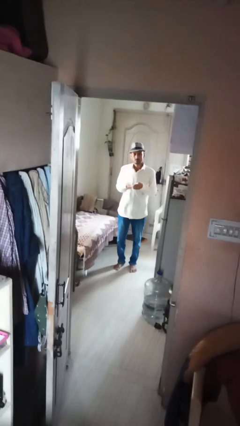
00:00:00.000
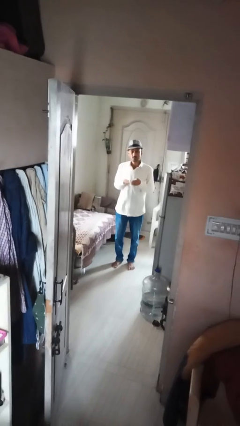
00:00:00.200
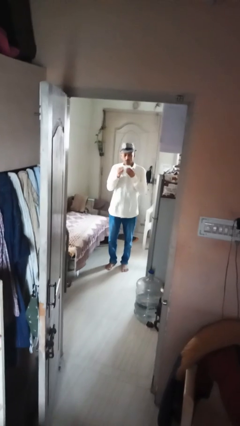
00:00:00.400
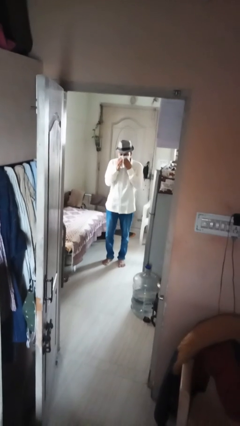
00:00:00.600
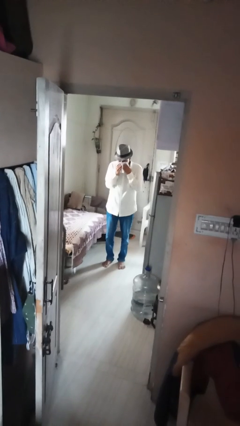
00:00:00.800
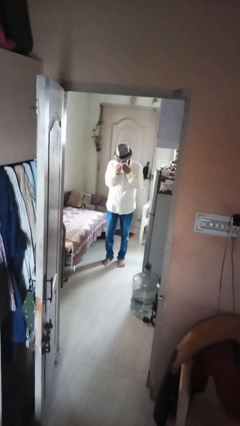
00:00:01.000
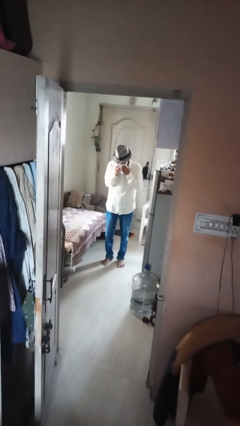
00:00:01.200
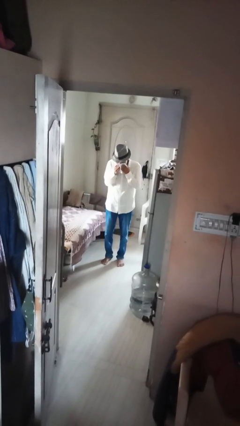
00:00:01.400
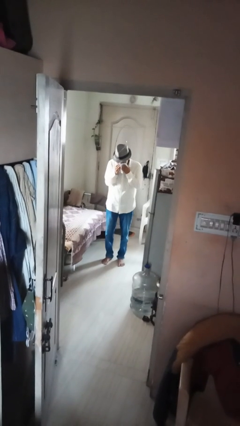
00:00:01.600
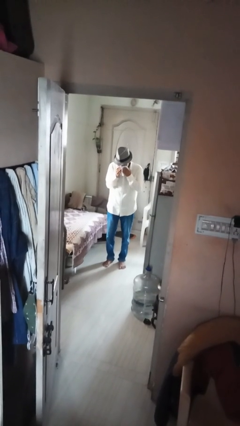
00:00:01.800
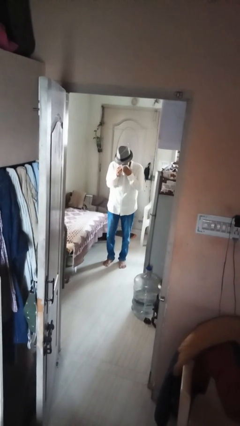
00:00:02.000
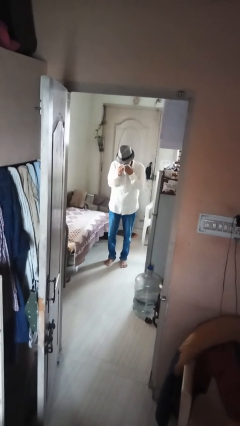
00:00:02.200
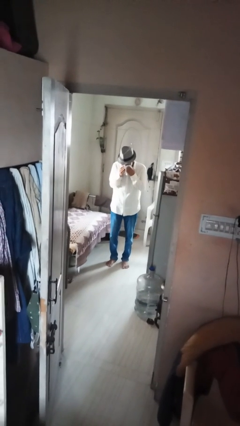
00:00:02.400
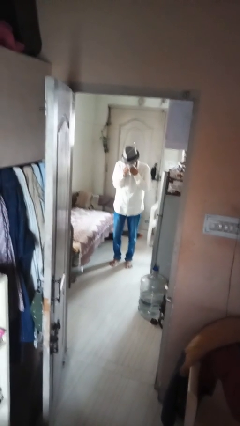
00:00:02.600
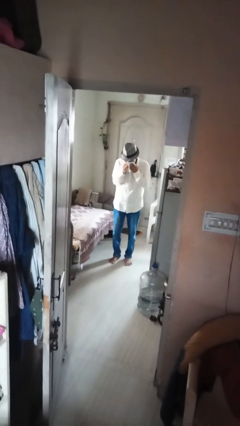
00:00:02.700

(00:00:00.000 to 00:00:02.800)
person blows nose

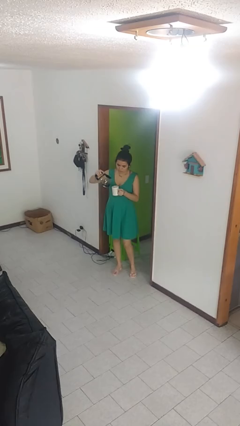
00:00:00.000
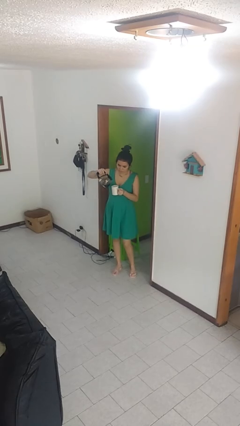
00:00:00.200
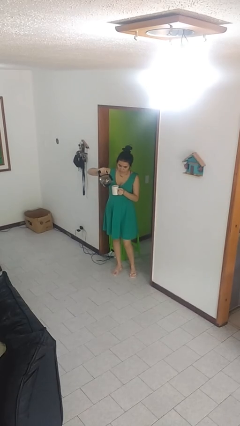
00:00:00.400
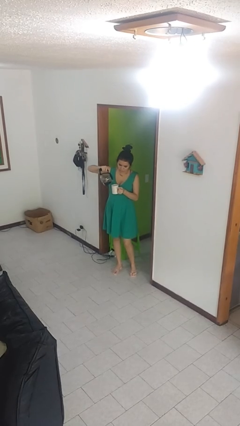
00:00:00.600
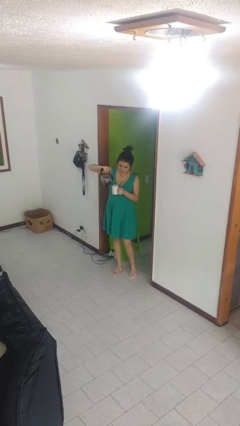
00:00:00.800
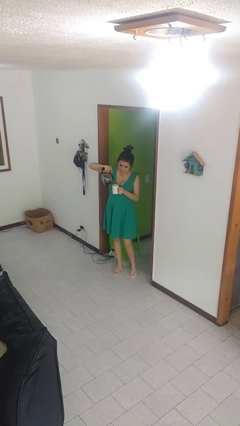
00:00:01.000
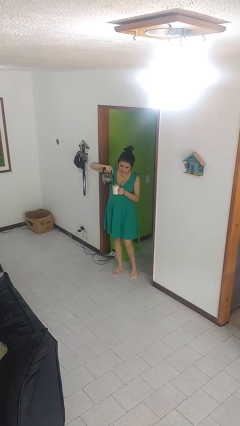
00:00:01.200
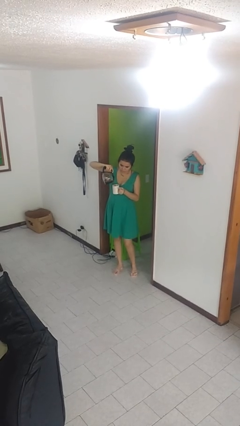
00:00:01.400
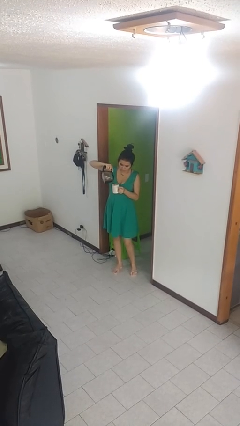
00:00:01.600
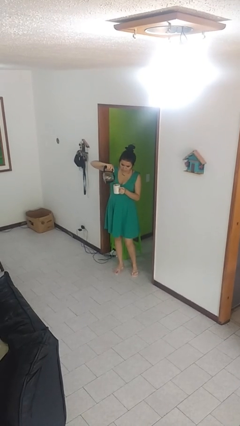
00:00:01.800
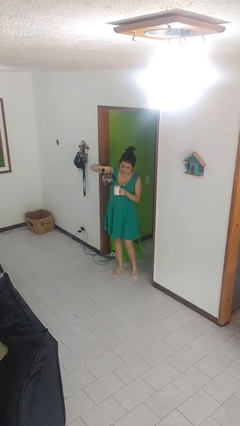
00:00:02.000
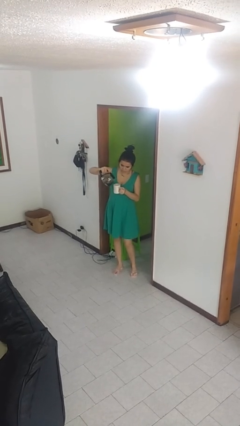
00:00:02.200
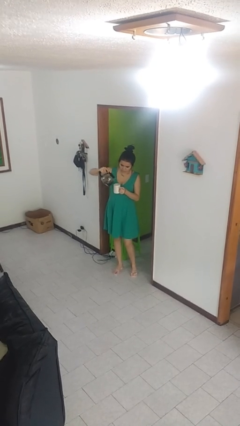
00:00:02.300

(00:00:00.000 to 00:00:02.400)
person pours coffee into mug

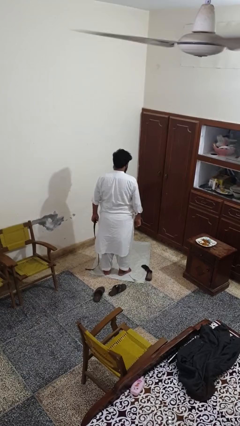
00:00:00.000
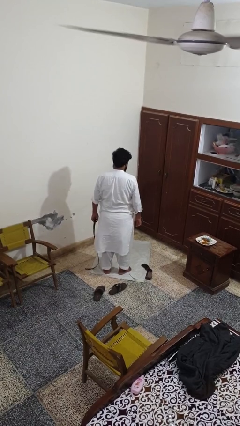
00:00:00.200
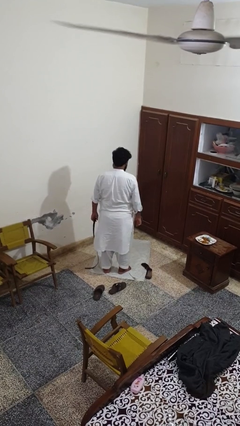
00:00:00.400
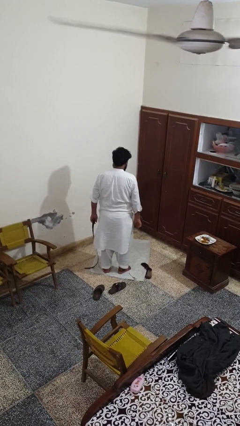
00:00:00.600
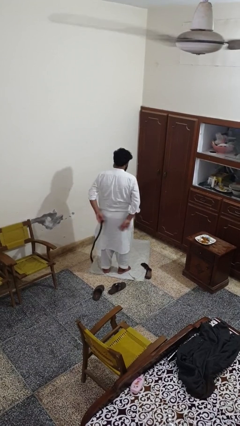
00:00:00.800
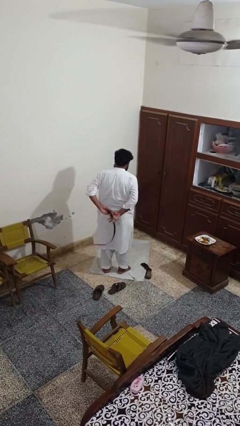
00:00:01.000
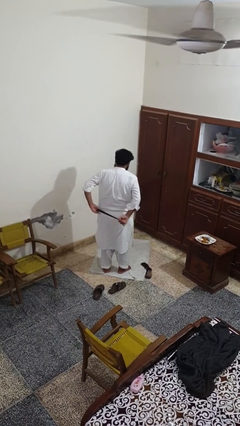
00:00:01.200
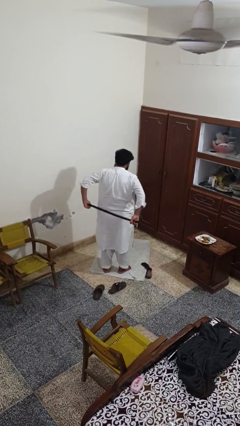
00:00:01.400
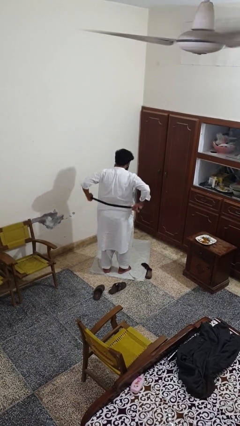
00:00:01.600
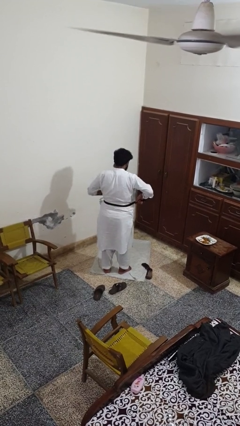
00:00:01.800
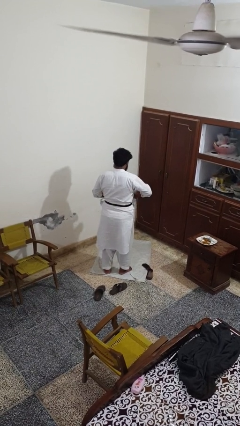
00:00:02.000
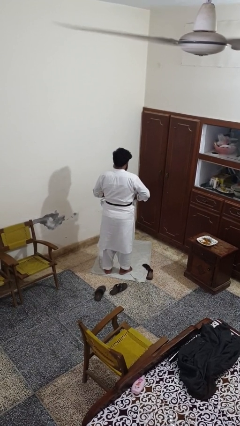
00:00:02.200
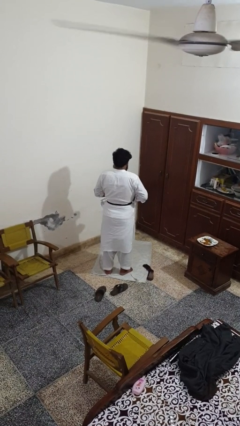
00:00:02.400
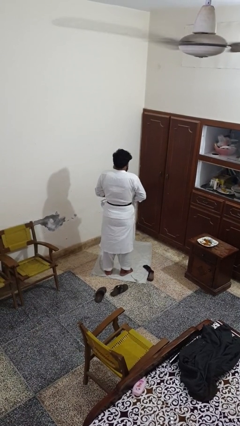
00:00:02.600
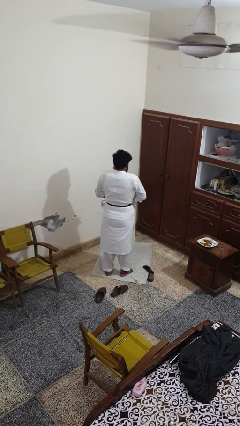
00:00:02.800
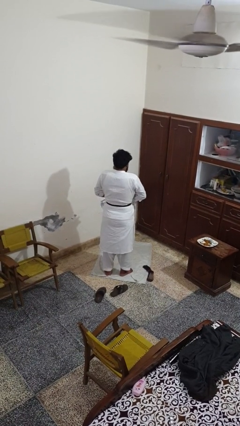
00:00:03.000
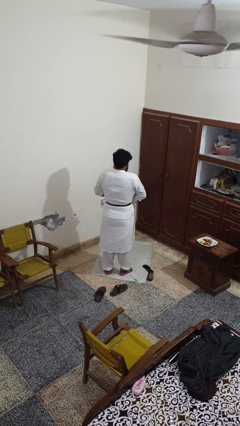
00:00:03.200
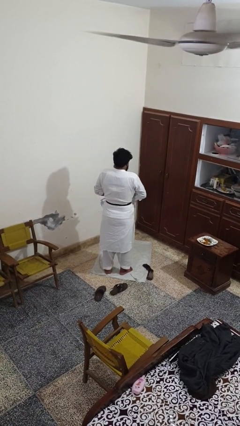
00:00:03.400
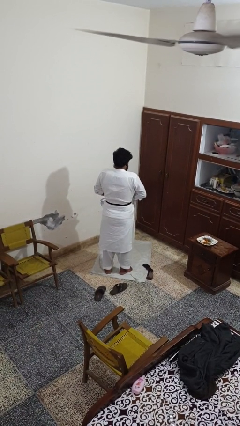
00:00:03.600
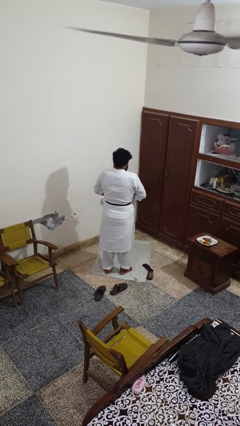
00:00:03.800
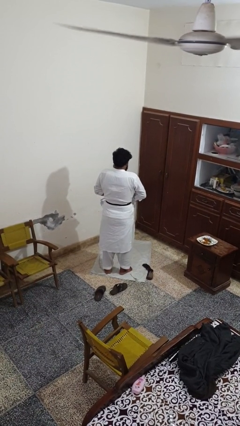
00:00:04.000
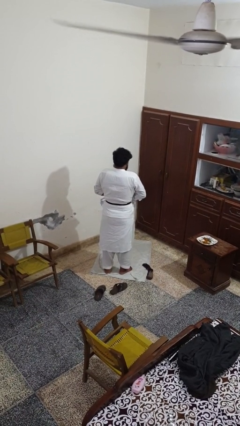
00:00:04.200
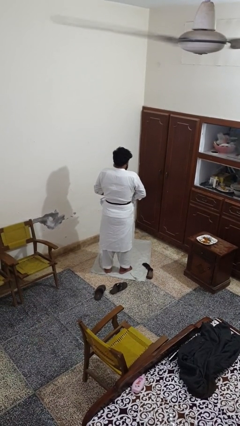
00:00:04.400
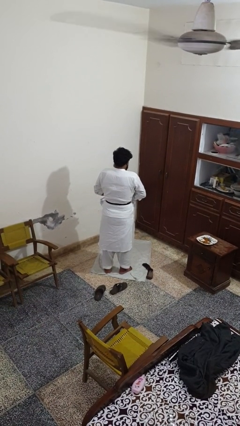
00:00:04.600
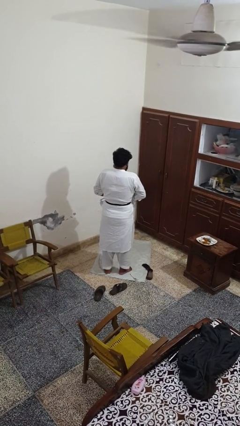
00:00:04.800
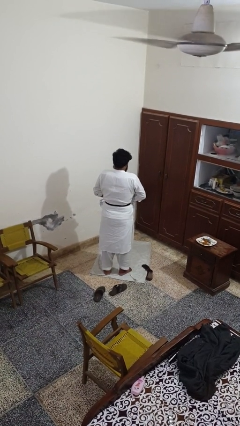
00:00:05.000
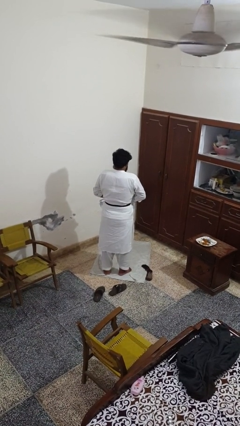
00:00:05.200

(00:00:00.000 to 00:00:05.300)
person puts on belt

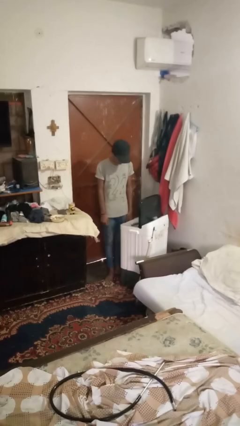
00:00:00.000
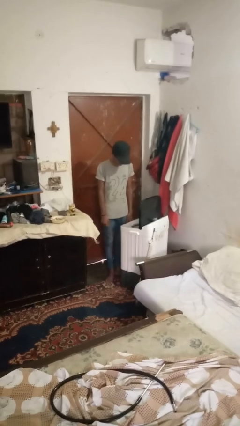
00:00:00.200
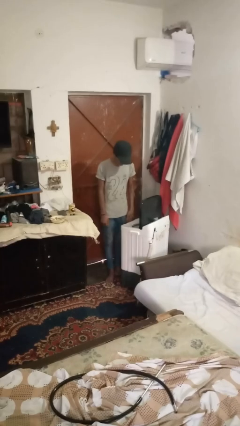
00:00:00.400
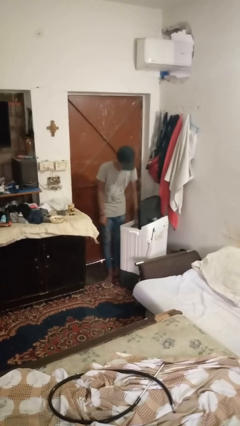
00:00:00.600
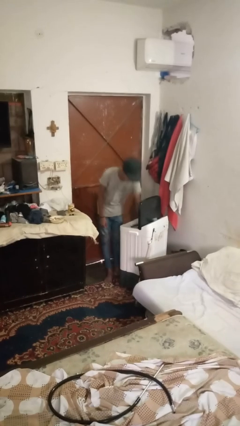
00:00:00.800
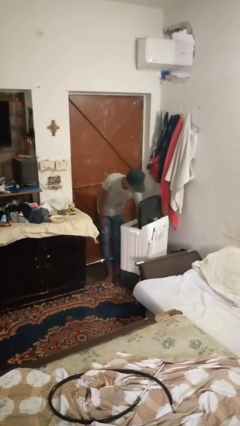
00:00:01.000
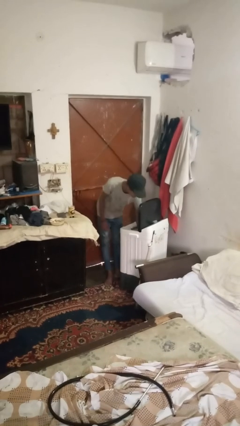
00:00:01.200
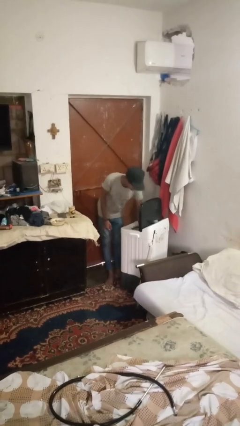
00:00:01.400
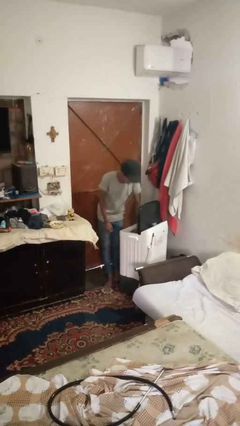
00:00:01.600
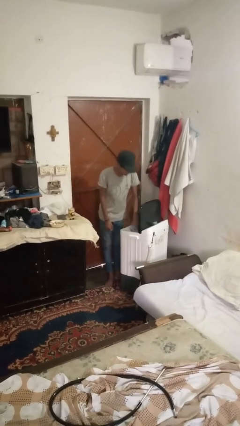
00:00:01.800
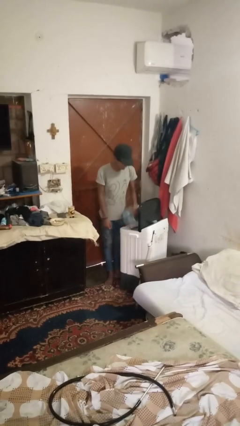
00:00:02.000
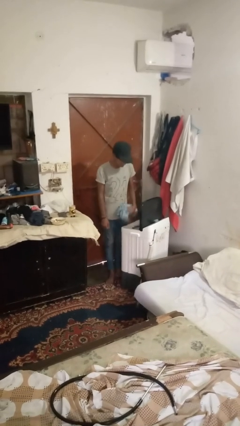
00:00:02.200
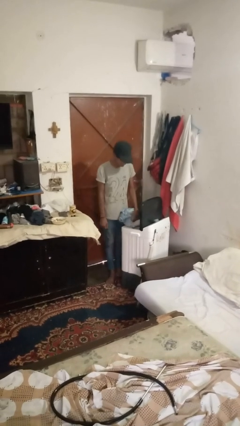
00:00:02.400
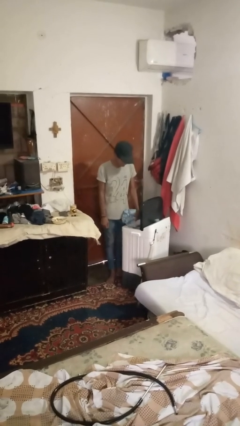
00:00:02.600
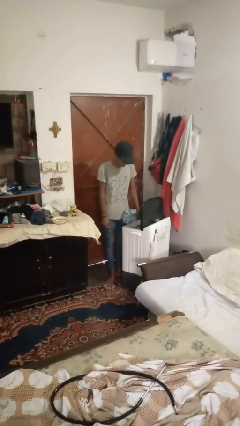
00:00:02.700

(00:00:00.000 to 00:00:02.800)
person unloads clotheswasher

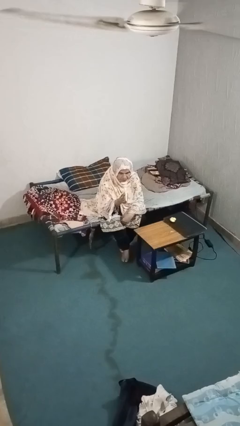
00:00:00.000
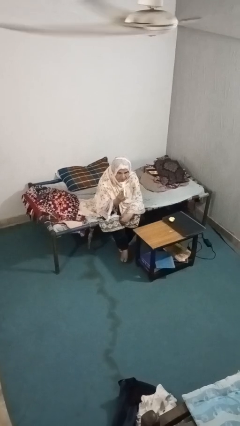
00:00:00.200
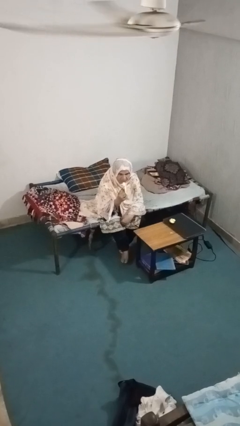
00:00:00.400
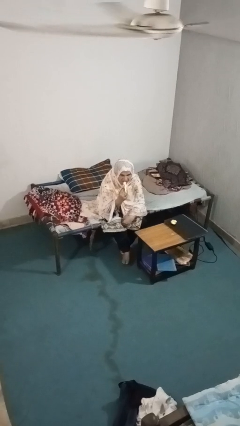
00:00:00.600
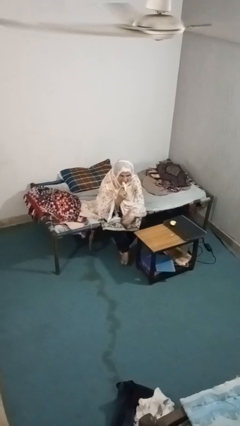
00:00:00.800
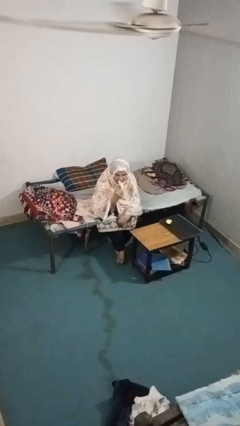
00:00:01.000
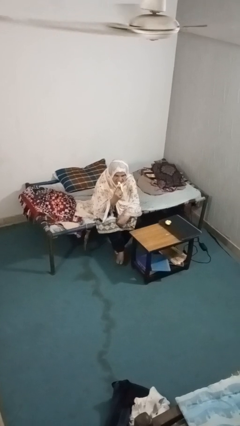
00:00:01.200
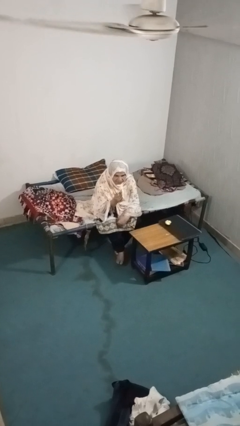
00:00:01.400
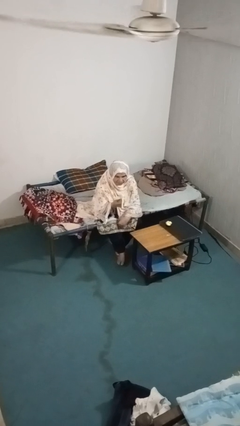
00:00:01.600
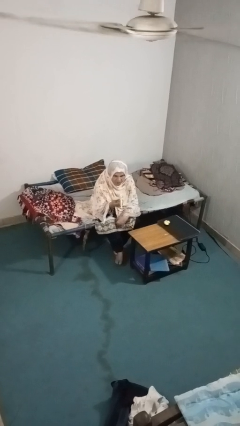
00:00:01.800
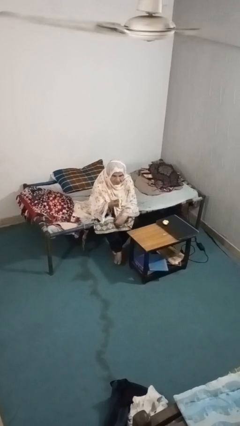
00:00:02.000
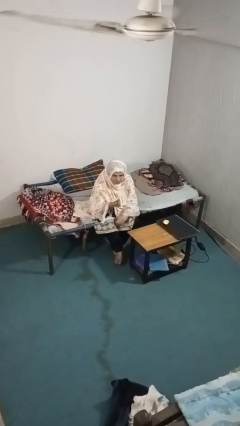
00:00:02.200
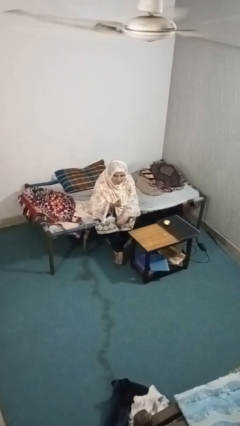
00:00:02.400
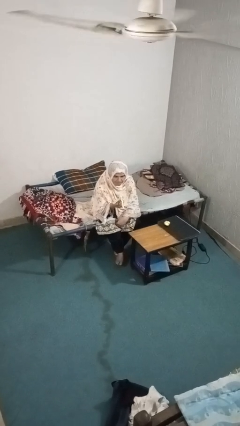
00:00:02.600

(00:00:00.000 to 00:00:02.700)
person eats banana

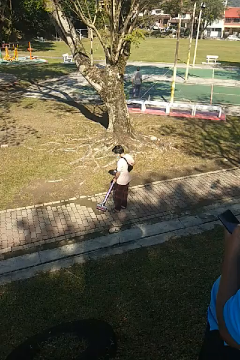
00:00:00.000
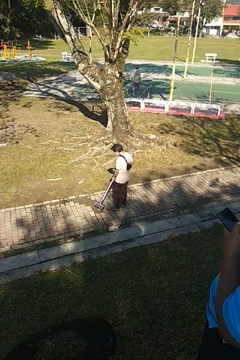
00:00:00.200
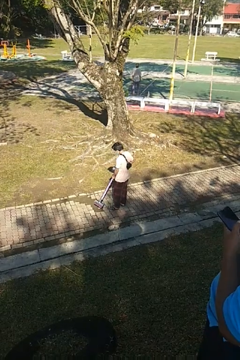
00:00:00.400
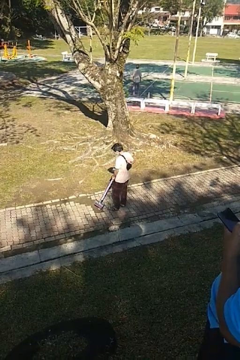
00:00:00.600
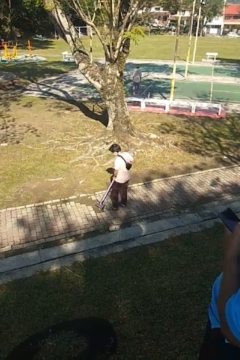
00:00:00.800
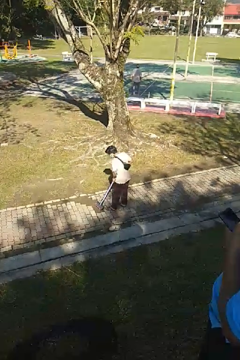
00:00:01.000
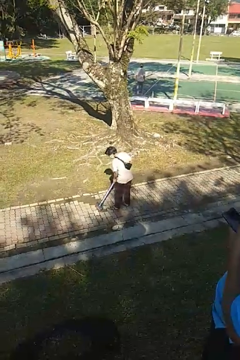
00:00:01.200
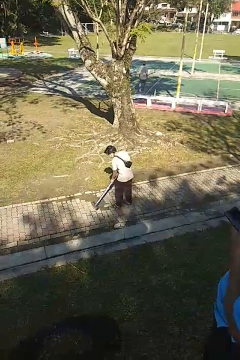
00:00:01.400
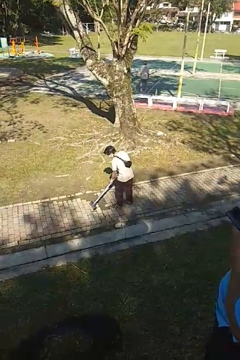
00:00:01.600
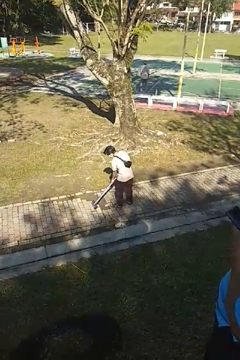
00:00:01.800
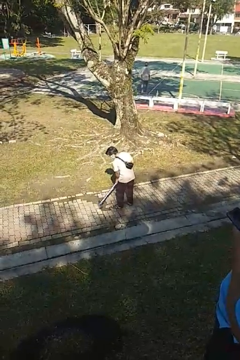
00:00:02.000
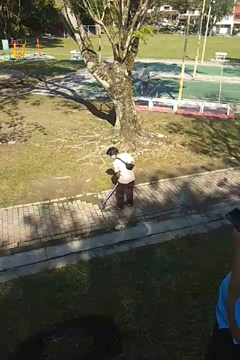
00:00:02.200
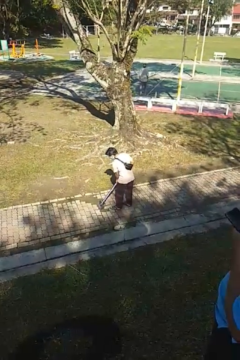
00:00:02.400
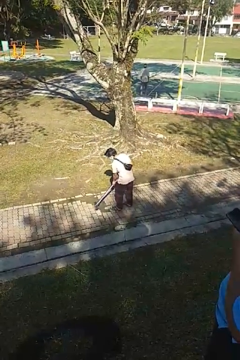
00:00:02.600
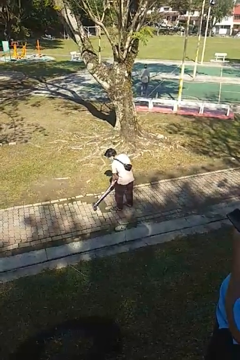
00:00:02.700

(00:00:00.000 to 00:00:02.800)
person vacuums carpet
